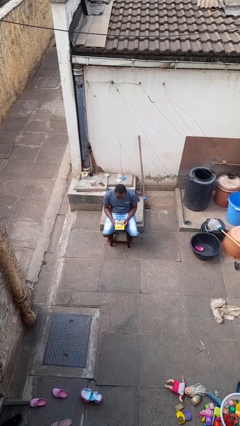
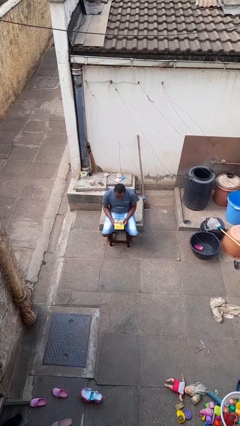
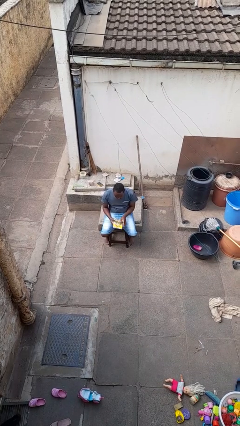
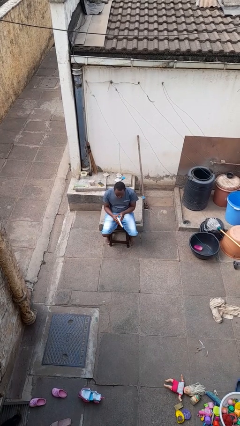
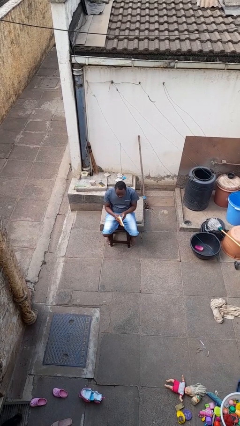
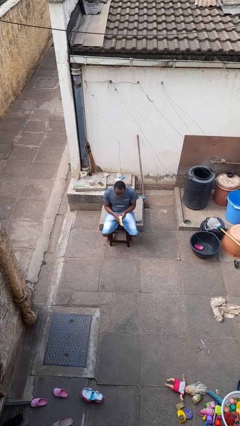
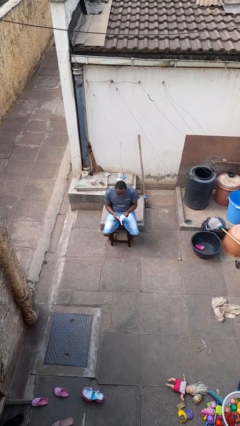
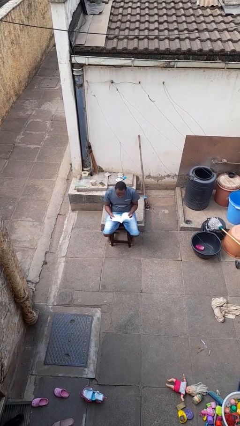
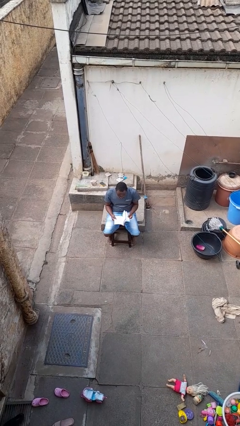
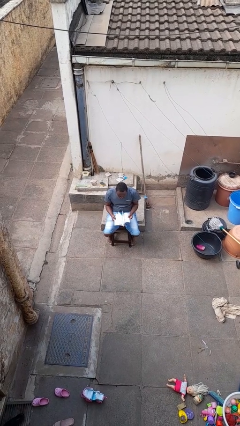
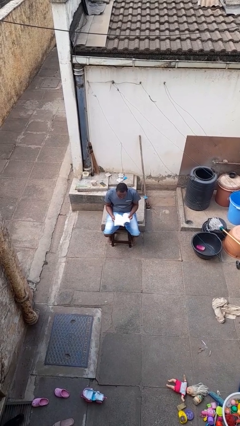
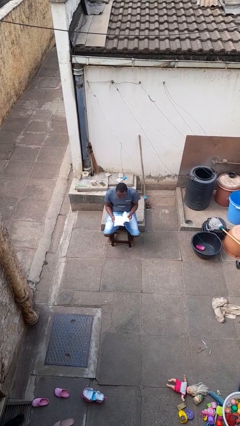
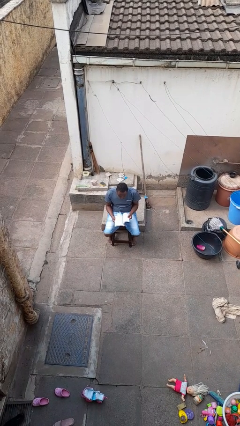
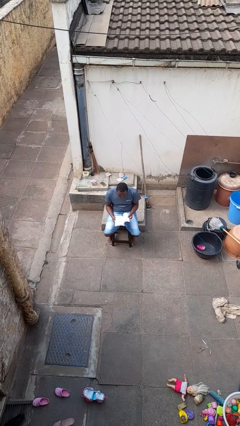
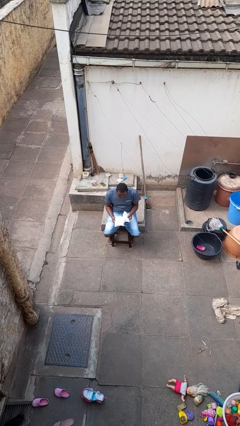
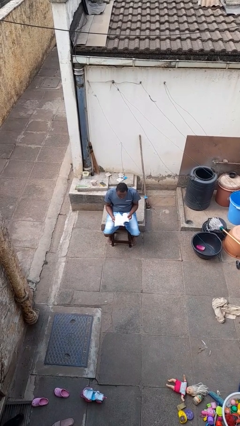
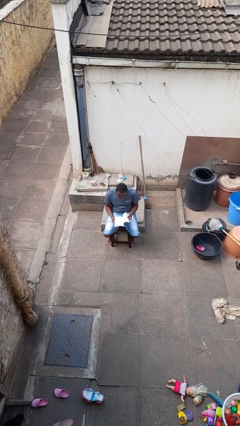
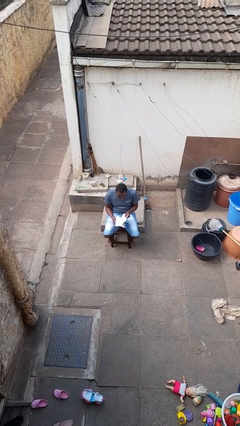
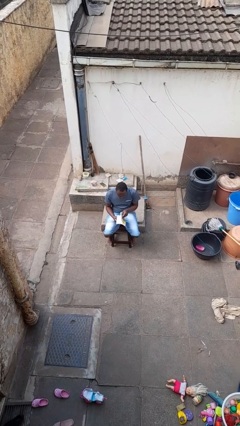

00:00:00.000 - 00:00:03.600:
person reads book

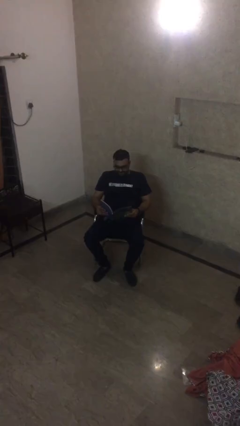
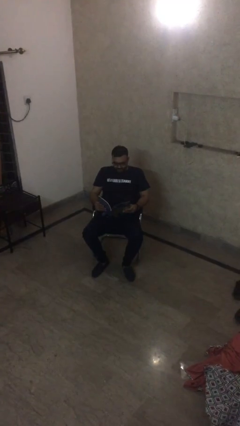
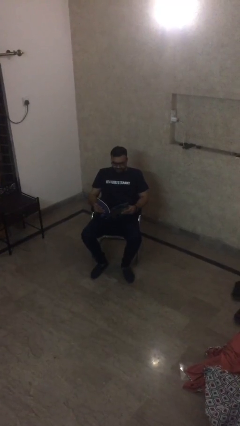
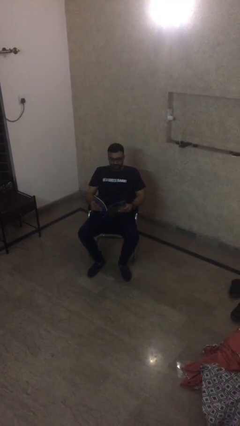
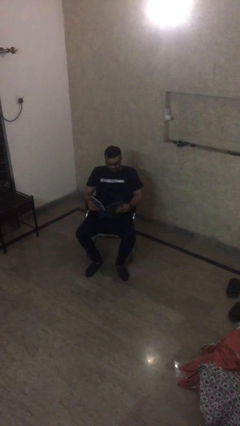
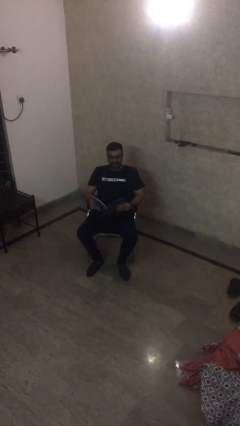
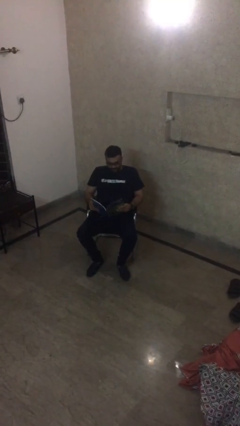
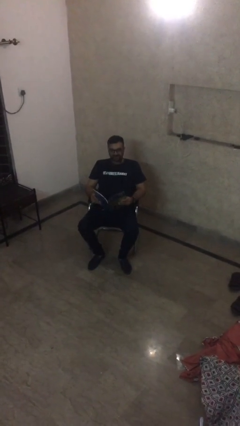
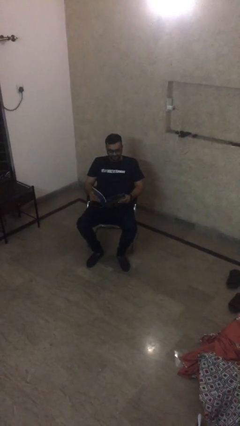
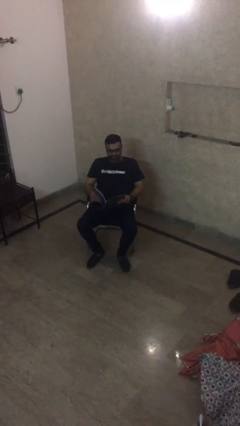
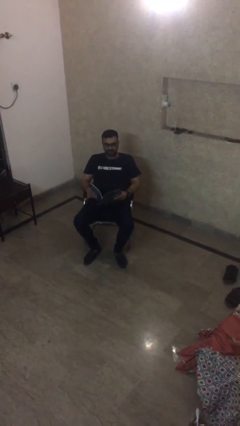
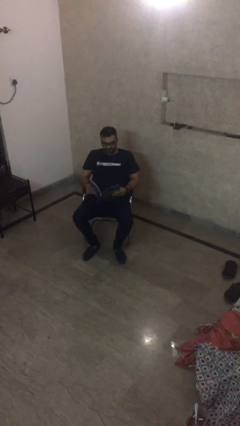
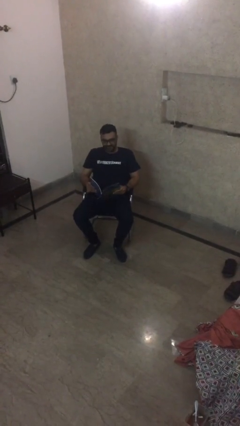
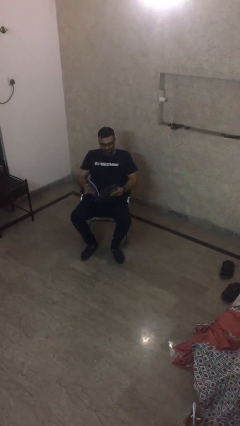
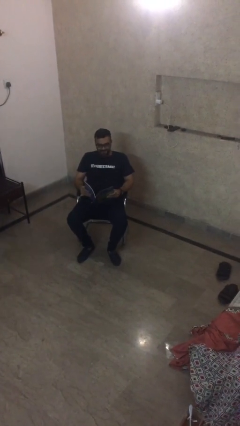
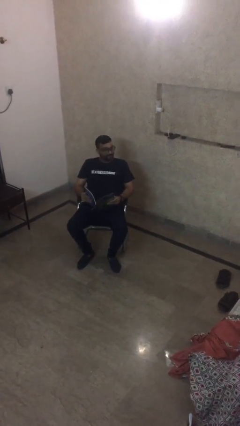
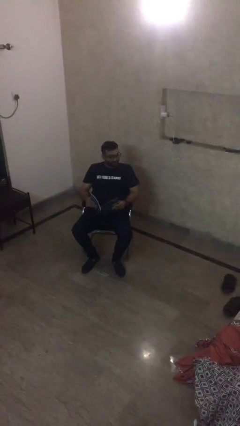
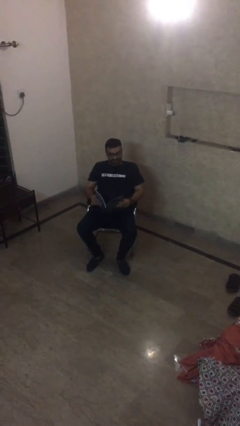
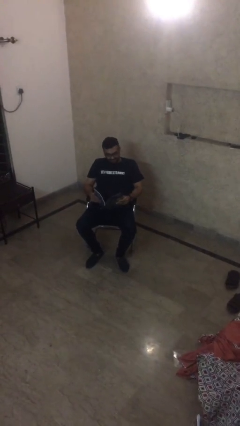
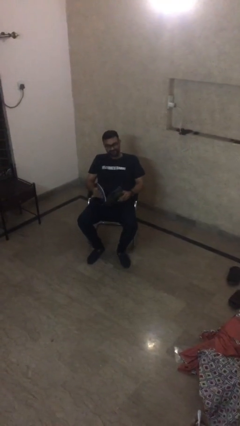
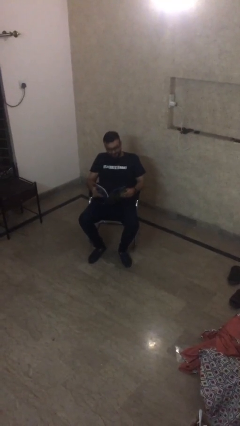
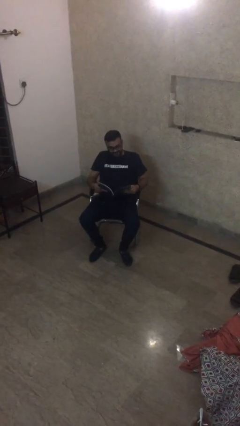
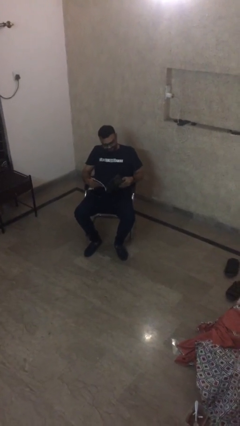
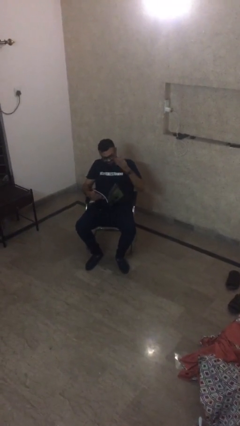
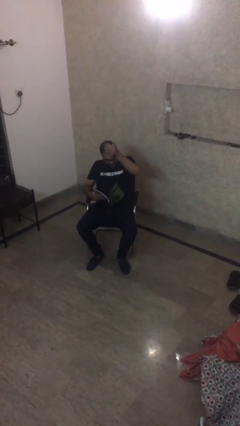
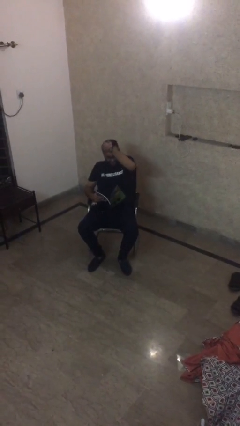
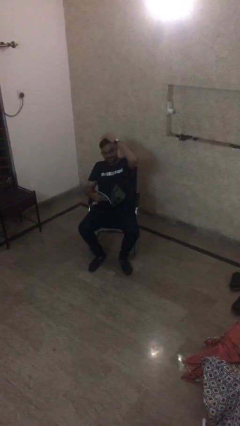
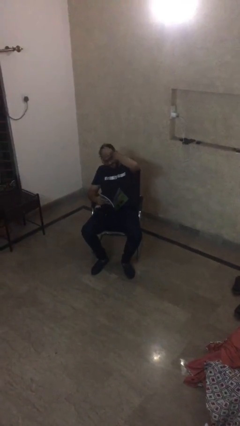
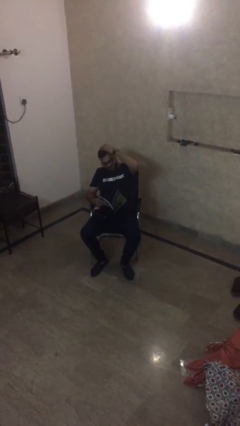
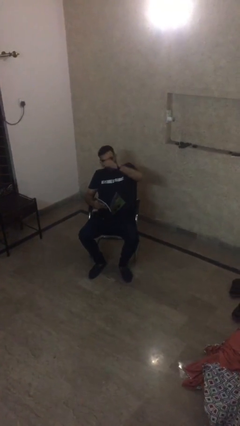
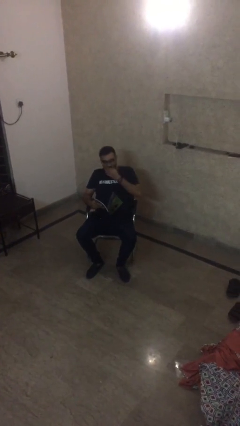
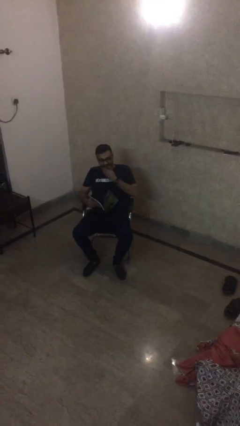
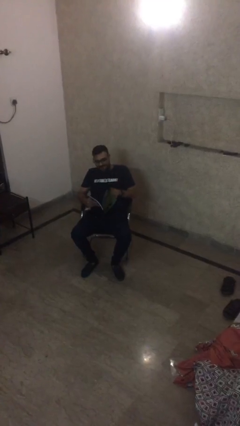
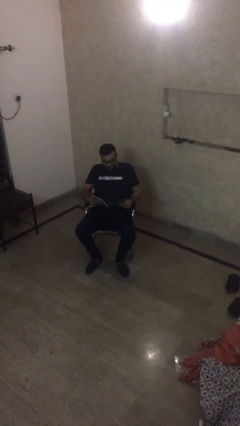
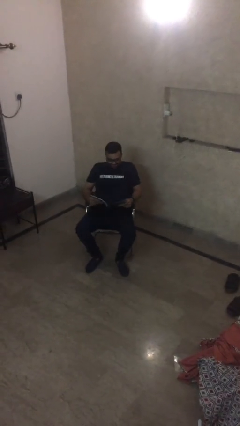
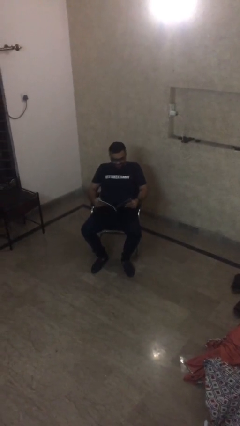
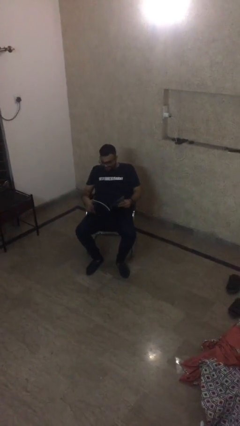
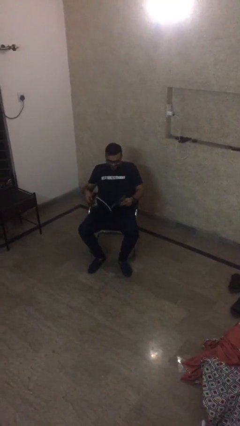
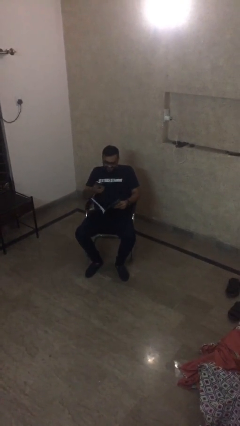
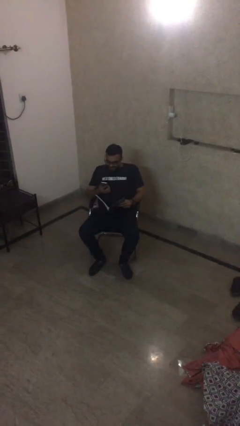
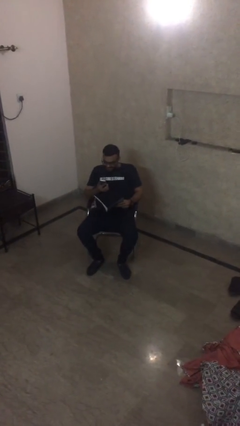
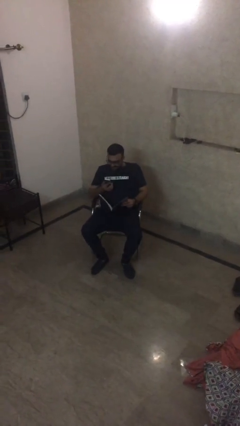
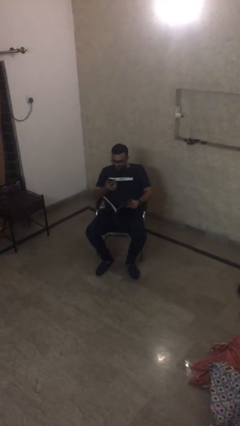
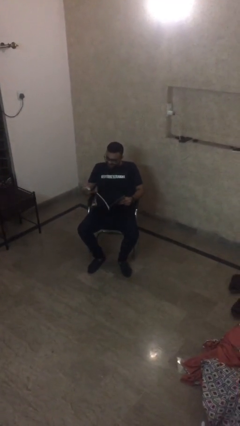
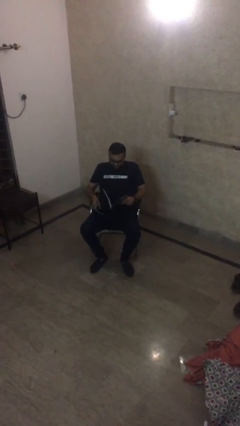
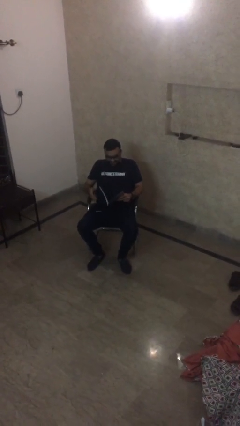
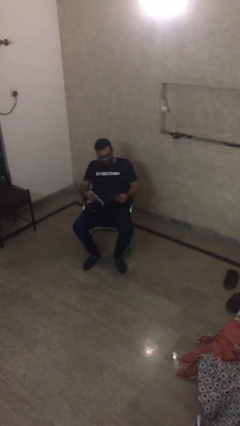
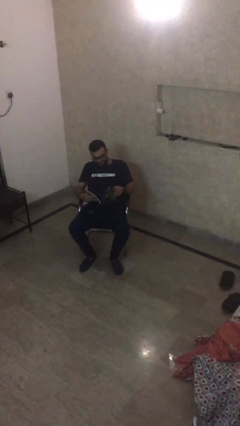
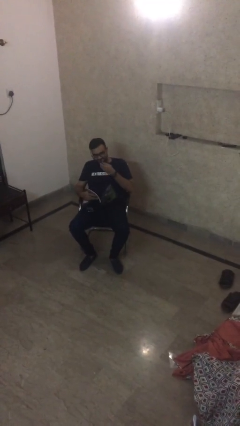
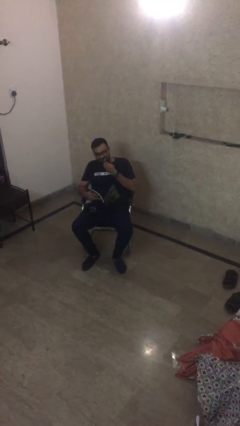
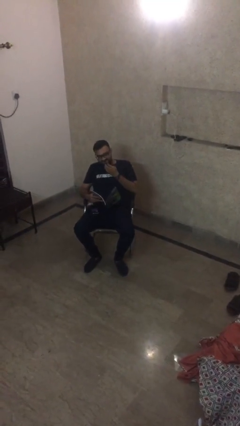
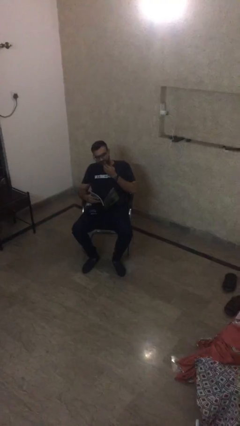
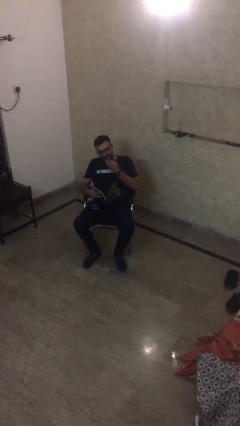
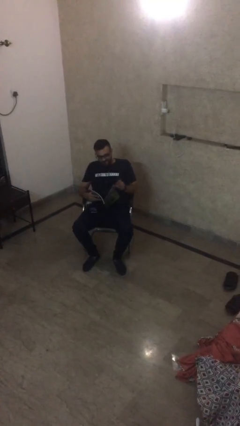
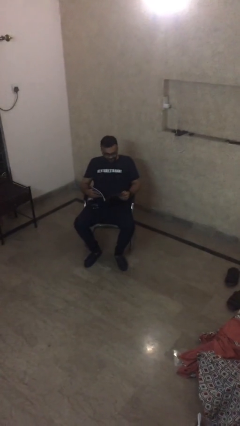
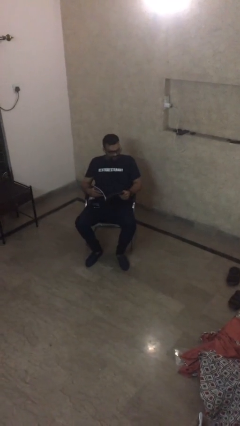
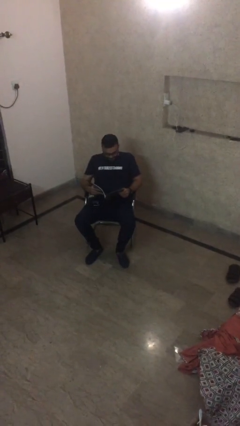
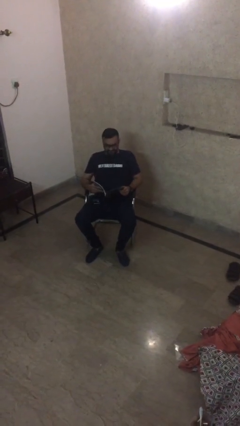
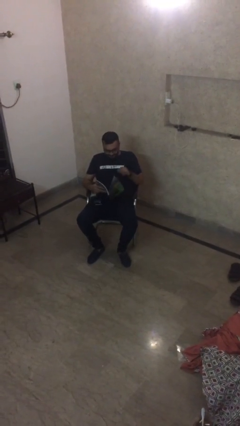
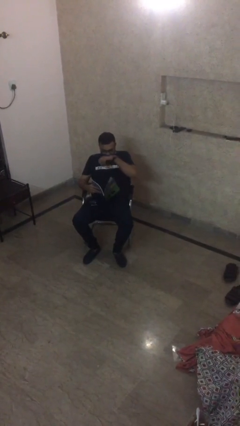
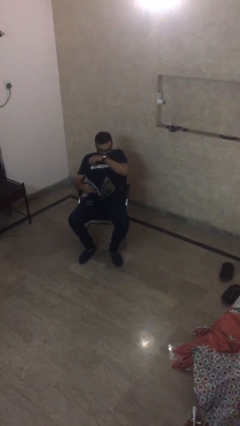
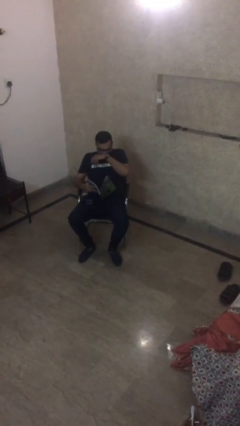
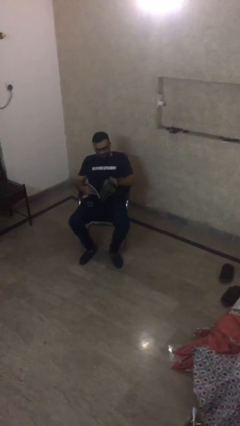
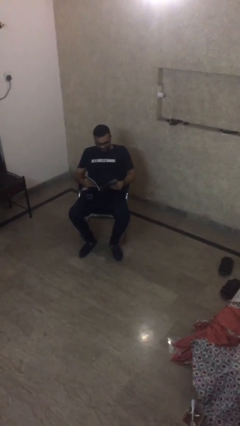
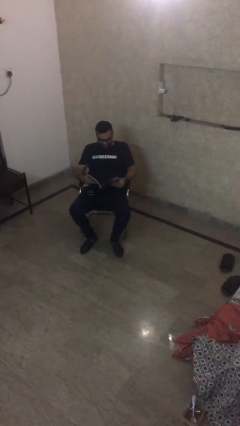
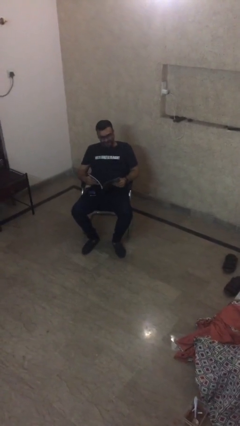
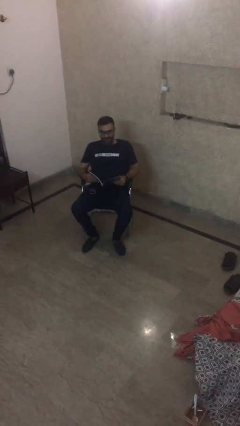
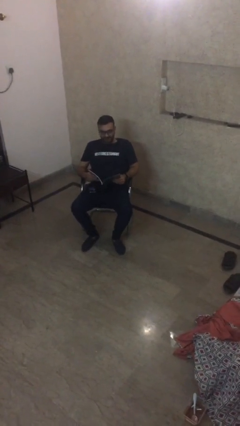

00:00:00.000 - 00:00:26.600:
person reads document

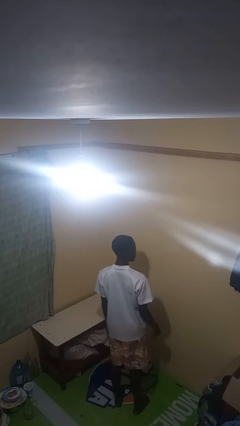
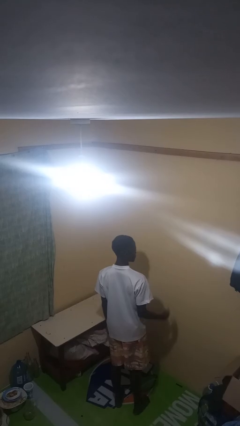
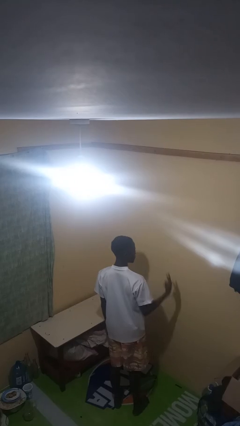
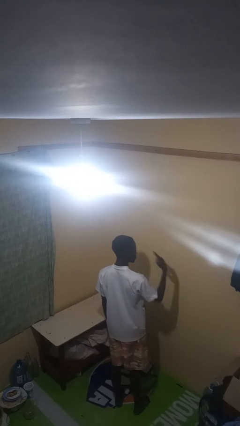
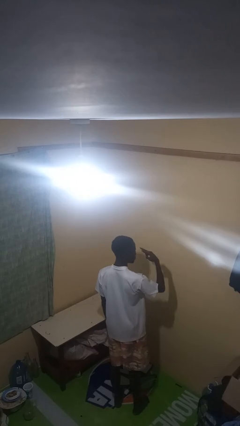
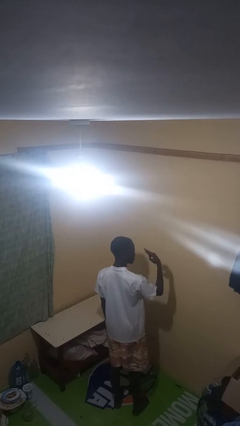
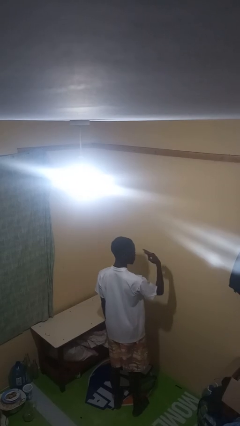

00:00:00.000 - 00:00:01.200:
person gestures watch closely
